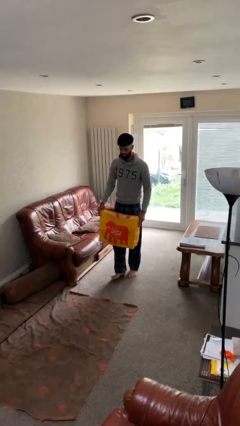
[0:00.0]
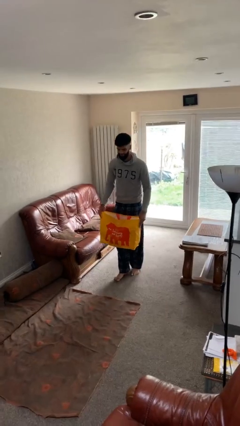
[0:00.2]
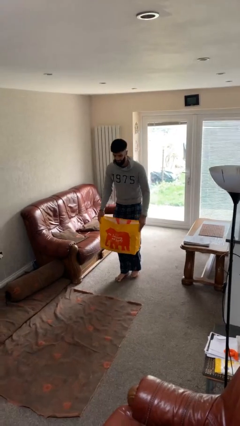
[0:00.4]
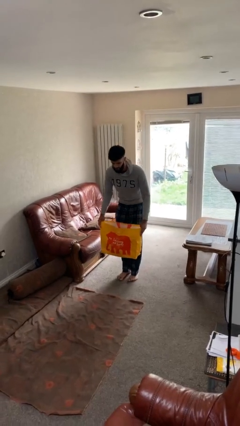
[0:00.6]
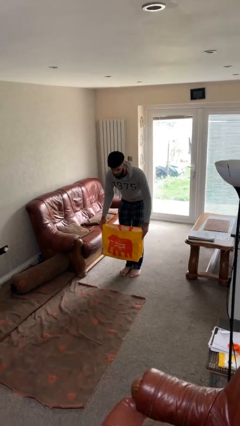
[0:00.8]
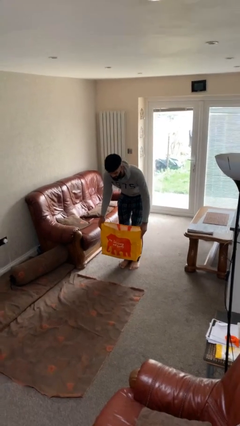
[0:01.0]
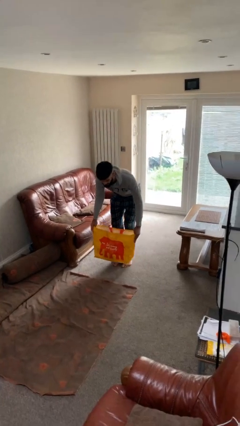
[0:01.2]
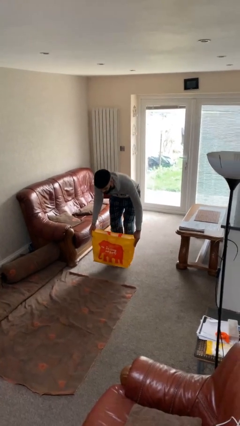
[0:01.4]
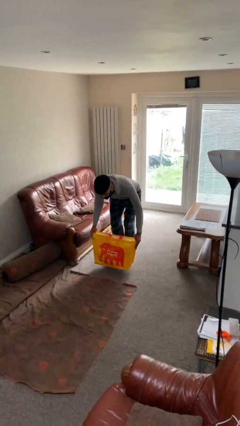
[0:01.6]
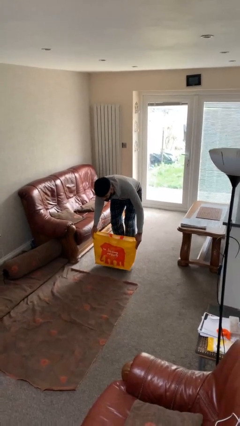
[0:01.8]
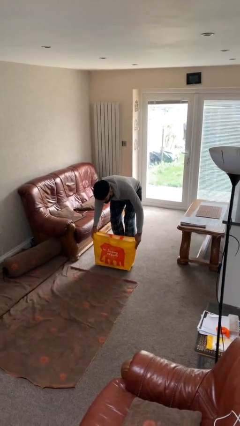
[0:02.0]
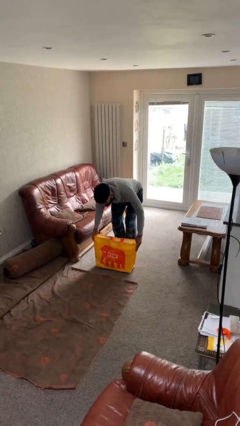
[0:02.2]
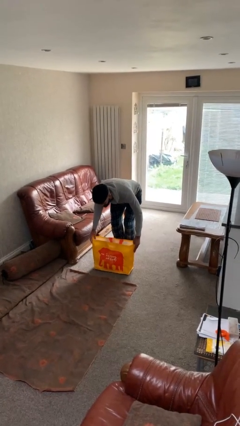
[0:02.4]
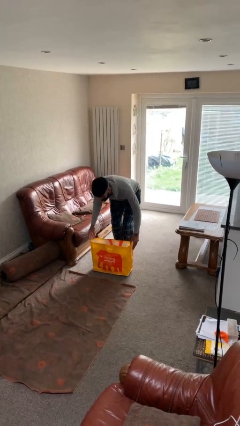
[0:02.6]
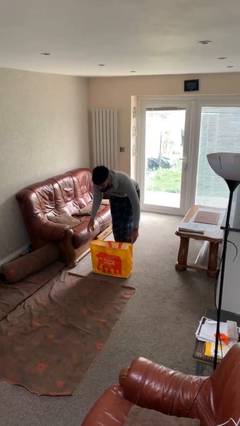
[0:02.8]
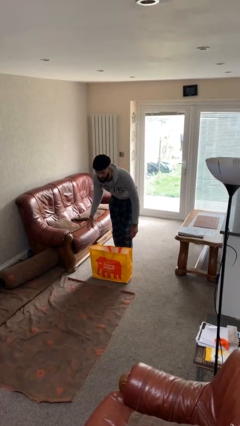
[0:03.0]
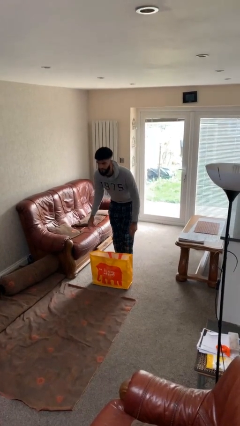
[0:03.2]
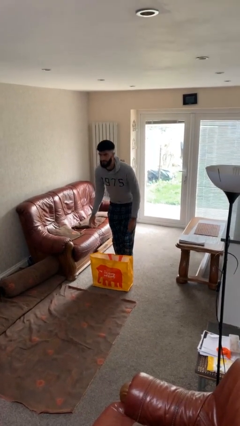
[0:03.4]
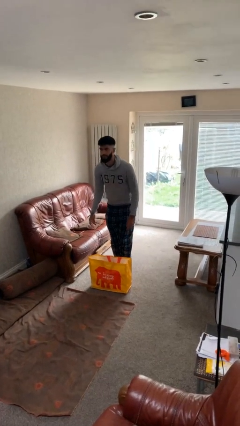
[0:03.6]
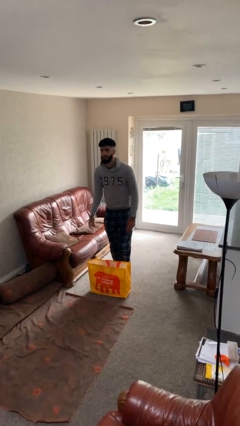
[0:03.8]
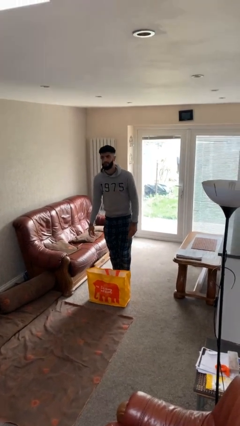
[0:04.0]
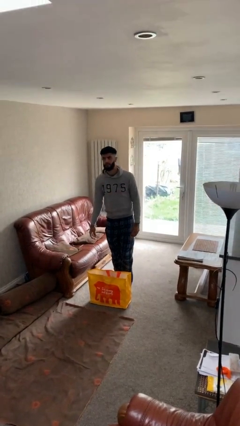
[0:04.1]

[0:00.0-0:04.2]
person puts down object on floor

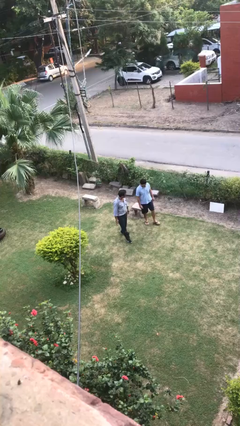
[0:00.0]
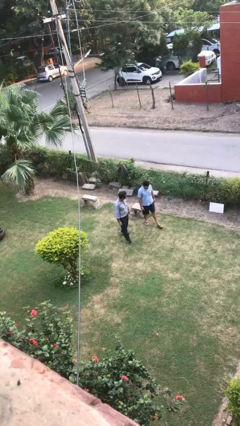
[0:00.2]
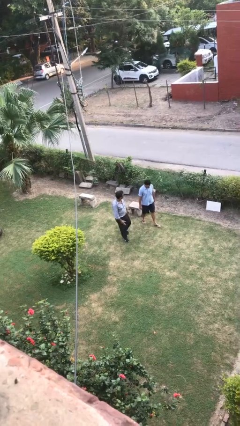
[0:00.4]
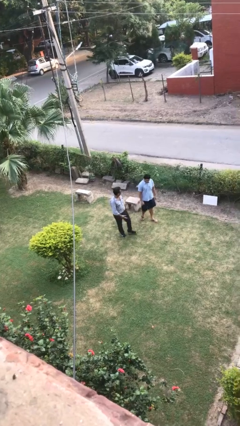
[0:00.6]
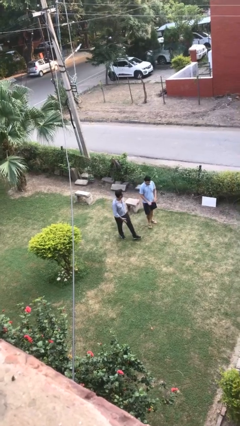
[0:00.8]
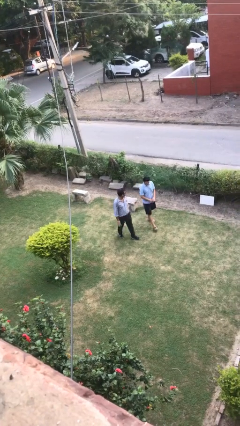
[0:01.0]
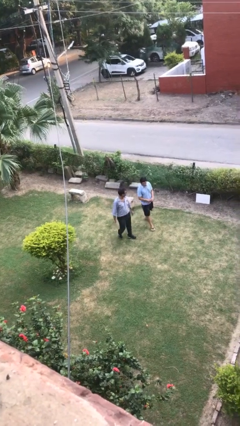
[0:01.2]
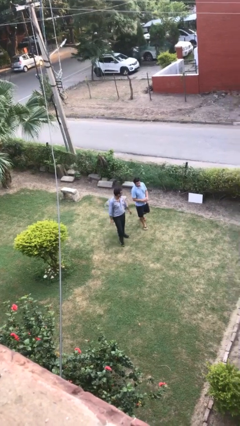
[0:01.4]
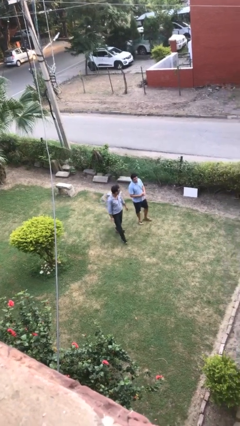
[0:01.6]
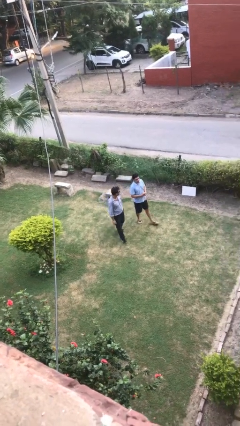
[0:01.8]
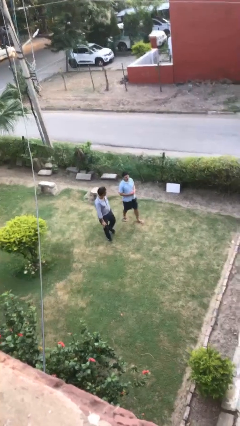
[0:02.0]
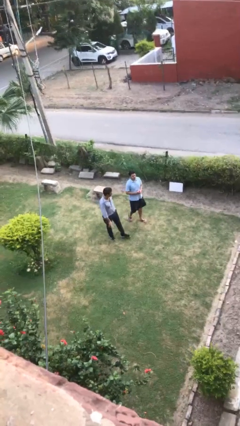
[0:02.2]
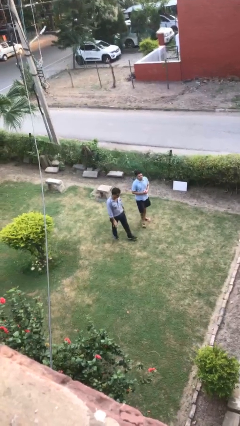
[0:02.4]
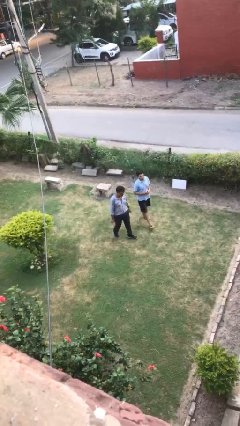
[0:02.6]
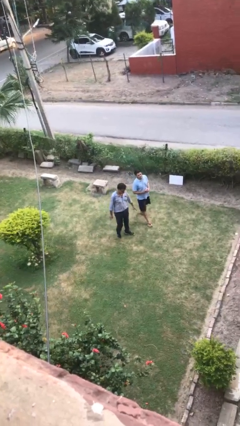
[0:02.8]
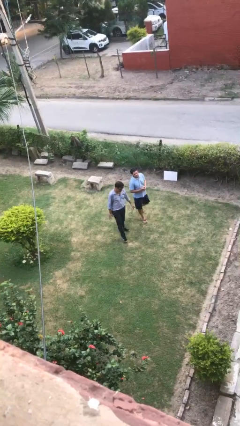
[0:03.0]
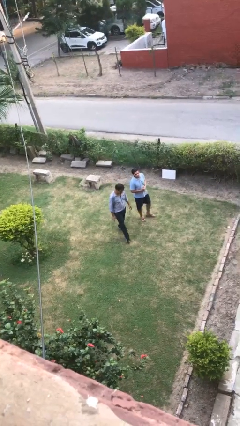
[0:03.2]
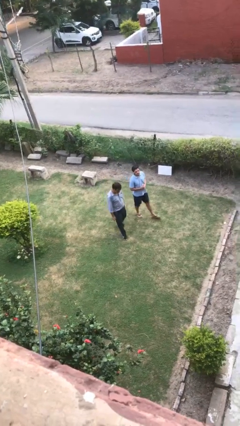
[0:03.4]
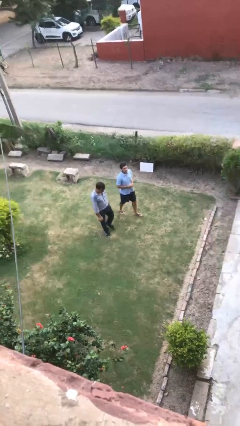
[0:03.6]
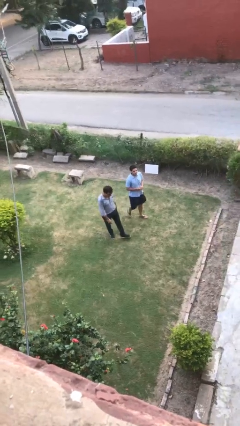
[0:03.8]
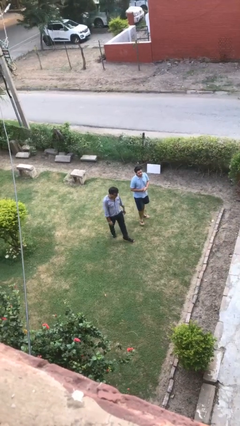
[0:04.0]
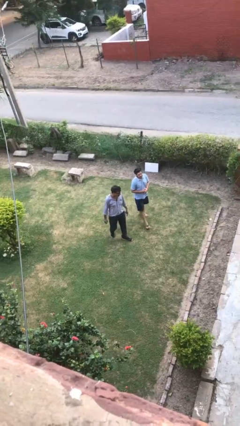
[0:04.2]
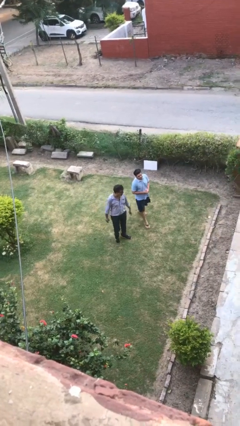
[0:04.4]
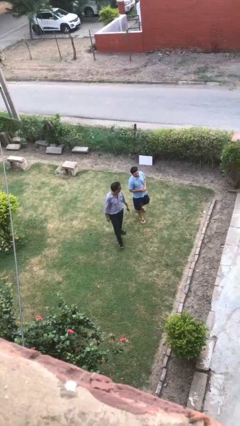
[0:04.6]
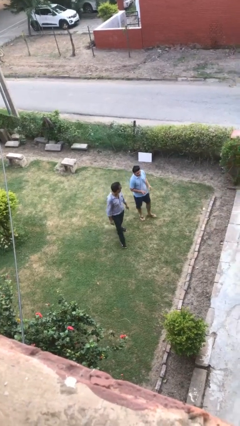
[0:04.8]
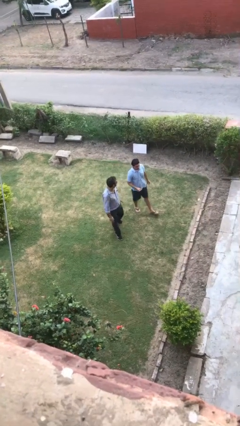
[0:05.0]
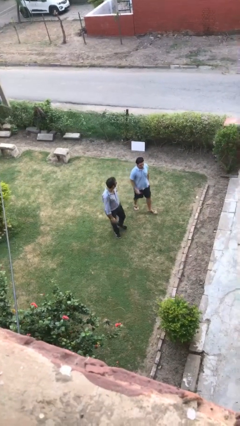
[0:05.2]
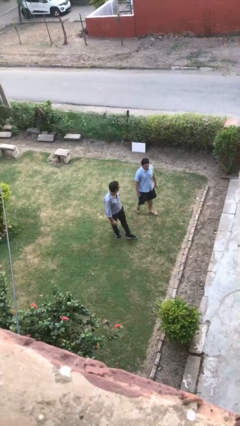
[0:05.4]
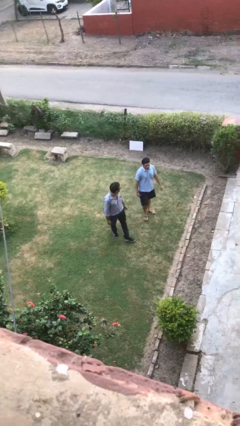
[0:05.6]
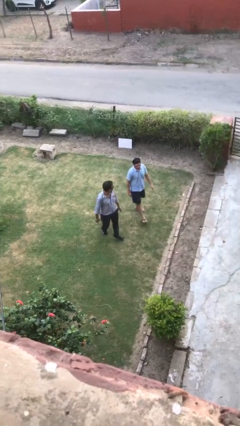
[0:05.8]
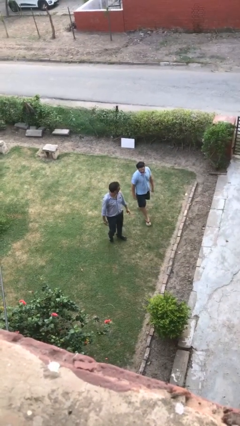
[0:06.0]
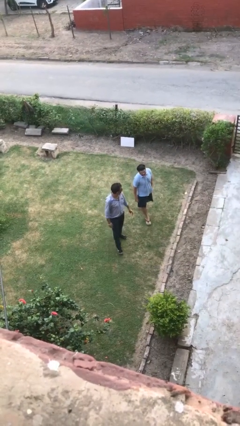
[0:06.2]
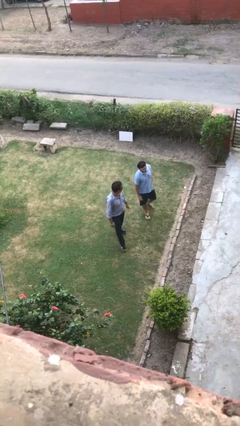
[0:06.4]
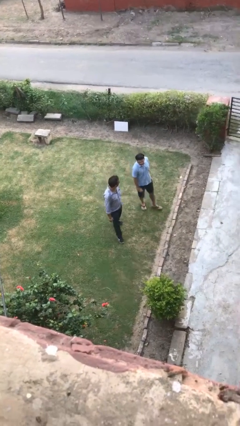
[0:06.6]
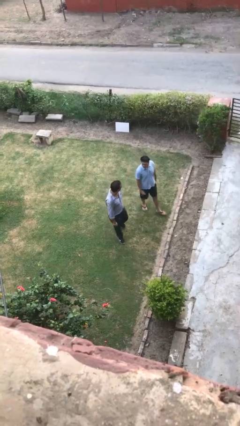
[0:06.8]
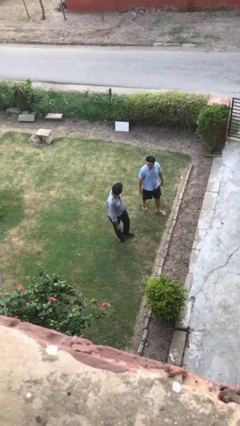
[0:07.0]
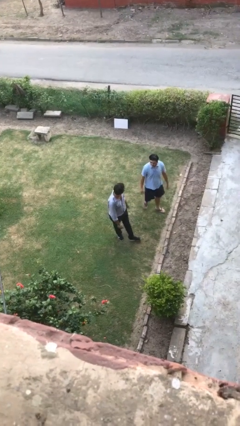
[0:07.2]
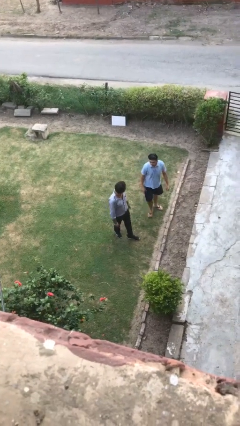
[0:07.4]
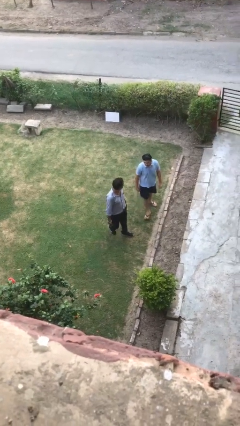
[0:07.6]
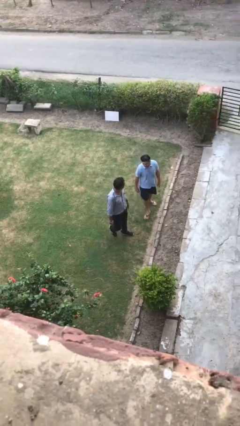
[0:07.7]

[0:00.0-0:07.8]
person talks to person

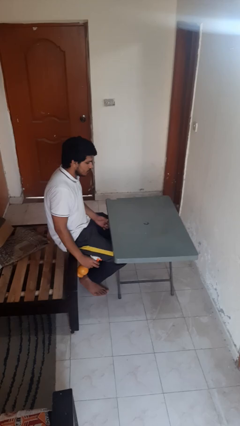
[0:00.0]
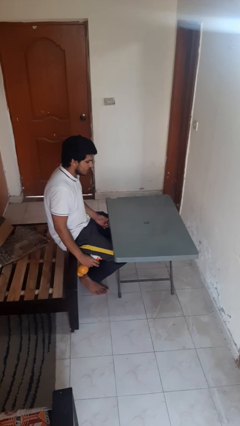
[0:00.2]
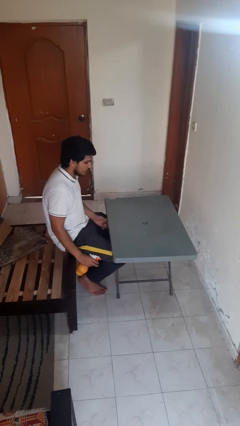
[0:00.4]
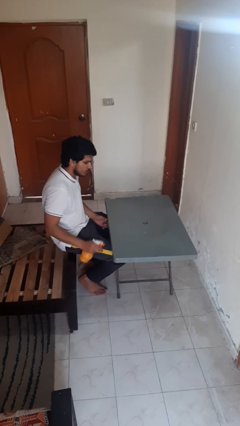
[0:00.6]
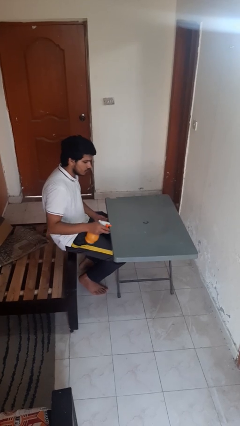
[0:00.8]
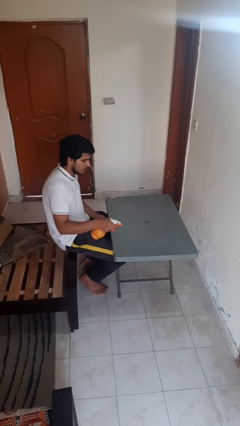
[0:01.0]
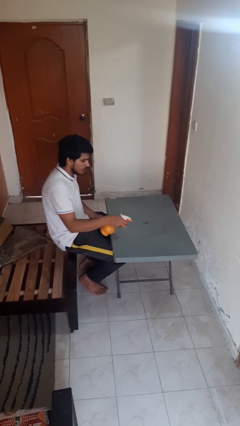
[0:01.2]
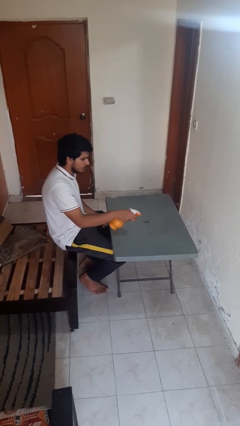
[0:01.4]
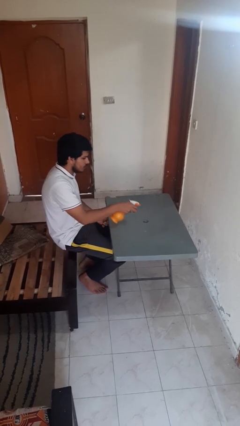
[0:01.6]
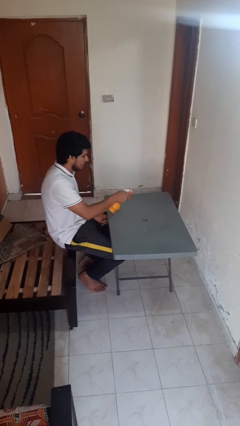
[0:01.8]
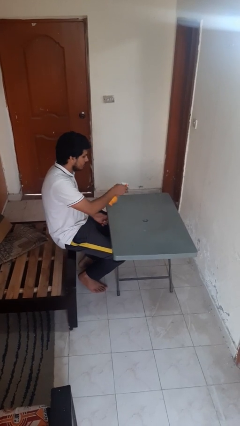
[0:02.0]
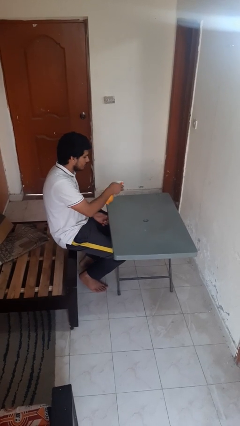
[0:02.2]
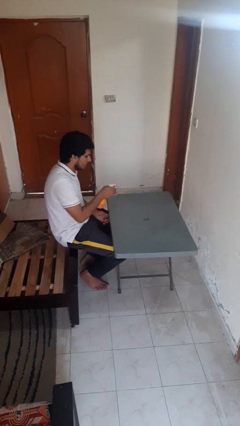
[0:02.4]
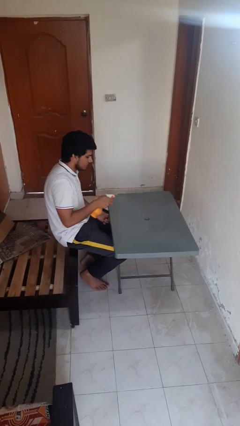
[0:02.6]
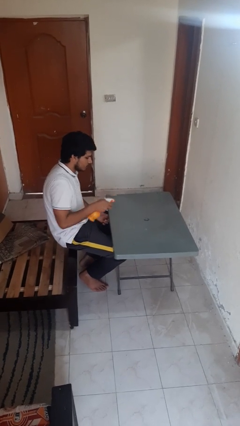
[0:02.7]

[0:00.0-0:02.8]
person sprays from bottle

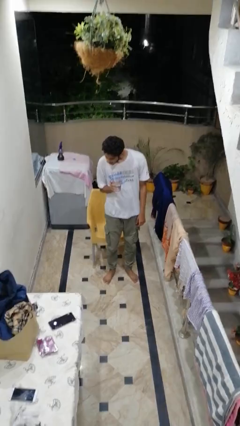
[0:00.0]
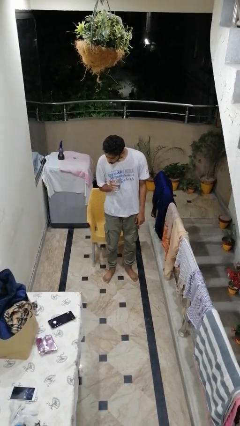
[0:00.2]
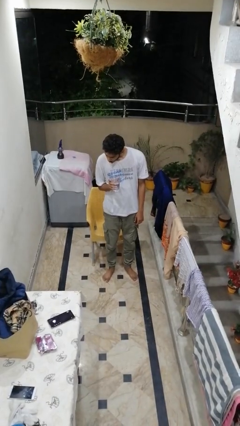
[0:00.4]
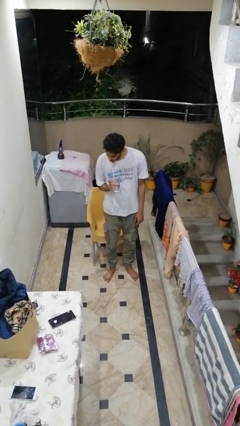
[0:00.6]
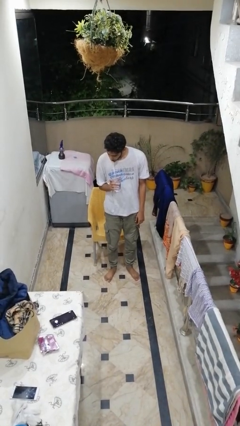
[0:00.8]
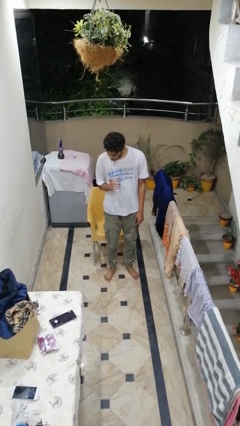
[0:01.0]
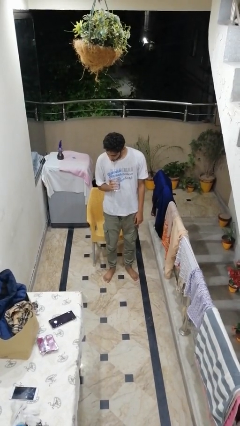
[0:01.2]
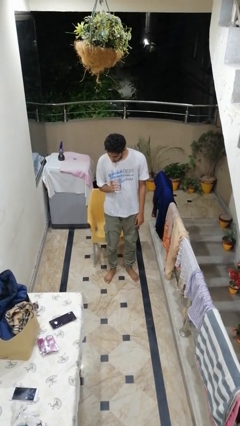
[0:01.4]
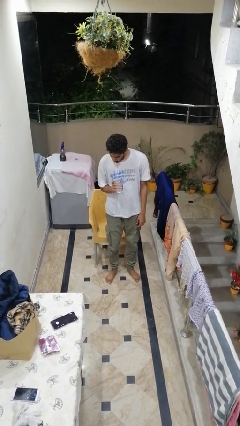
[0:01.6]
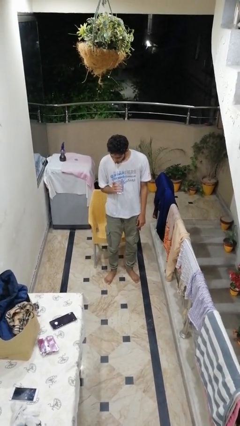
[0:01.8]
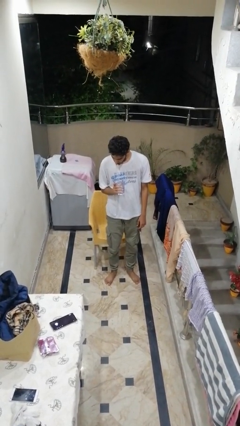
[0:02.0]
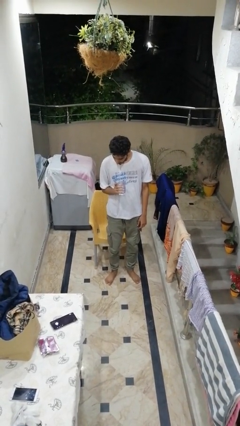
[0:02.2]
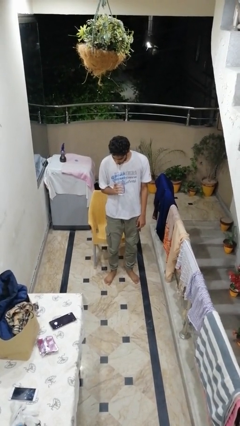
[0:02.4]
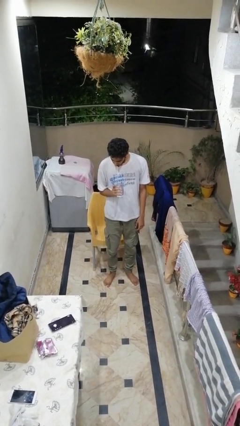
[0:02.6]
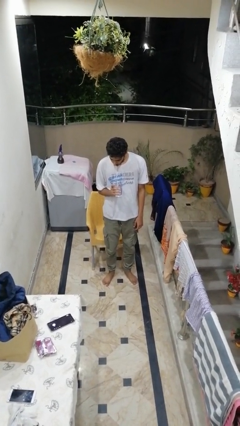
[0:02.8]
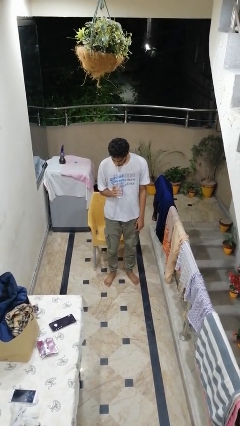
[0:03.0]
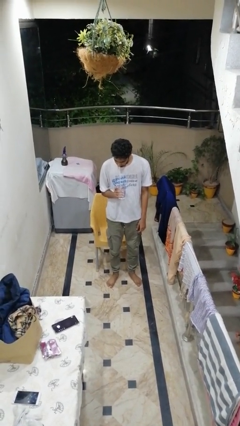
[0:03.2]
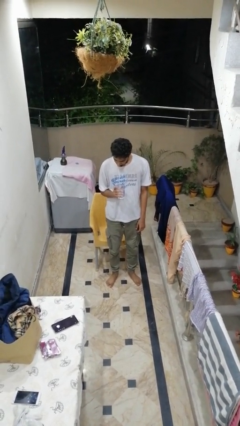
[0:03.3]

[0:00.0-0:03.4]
person drinks from straw
